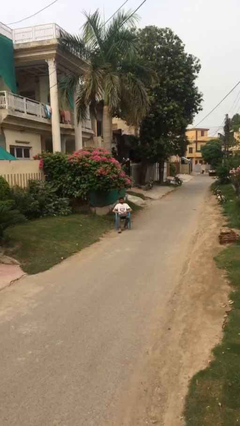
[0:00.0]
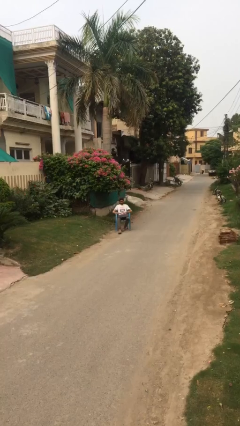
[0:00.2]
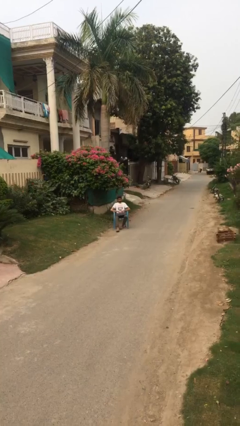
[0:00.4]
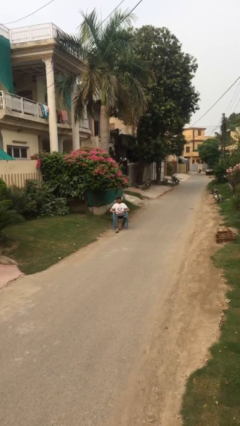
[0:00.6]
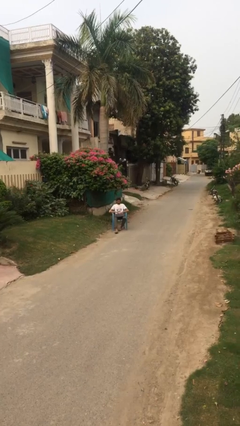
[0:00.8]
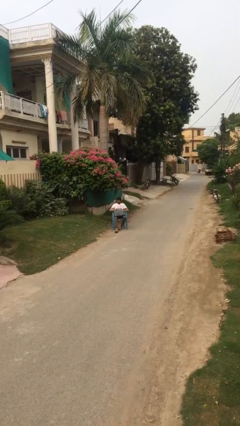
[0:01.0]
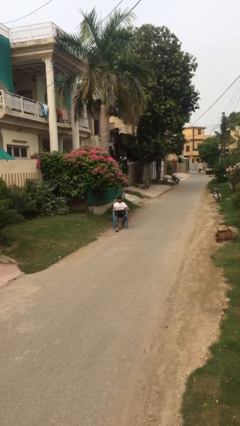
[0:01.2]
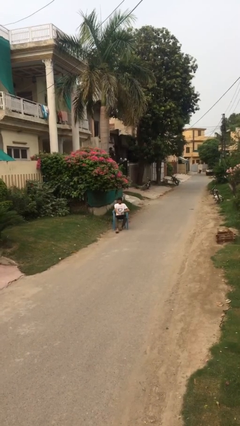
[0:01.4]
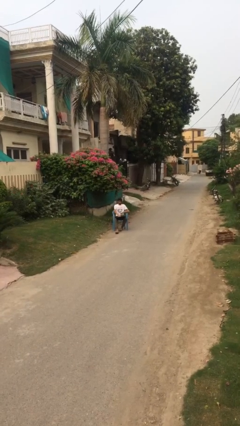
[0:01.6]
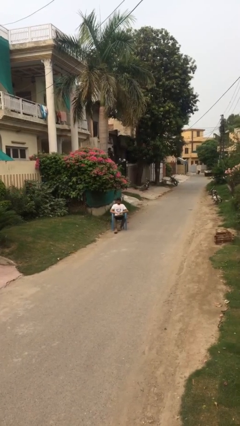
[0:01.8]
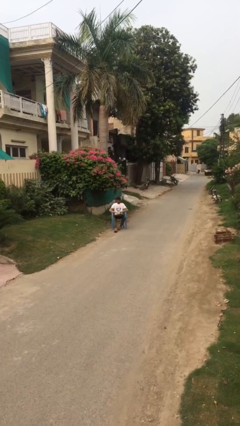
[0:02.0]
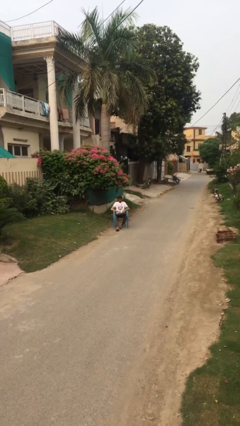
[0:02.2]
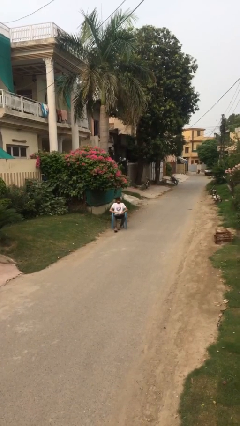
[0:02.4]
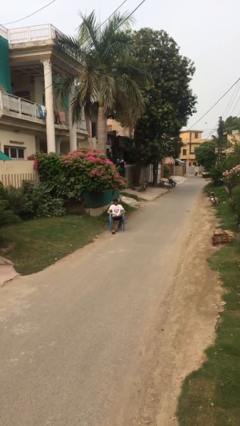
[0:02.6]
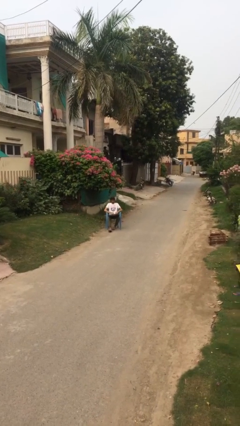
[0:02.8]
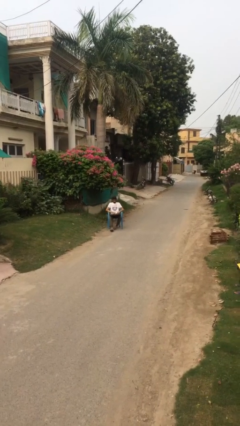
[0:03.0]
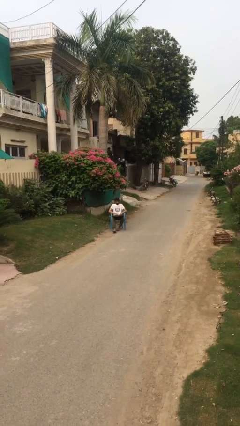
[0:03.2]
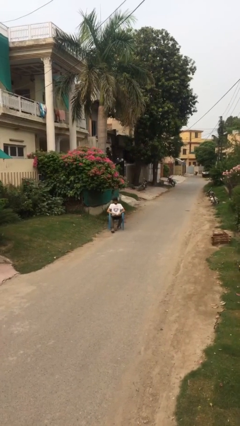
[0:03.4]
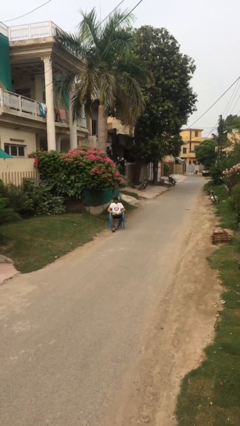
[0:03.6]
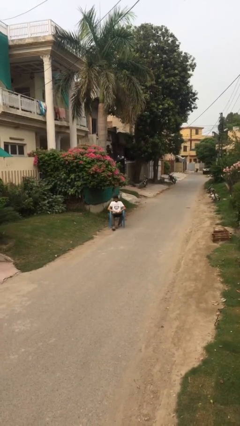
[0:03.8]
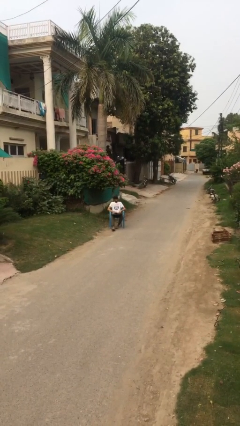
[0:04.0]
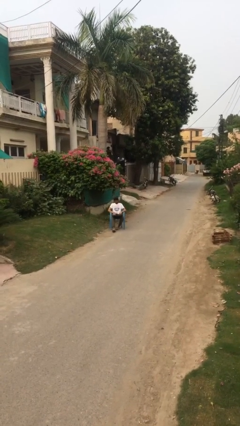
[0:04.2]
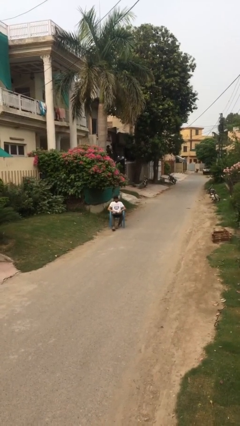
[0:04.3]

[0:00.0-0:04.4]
person interacts with laptop

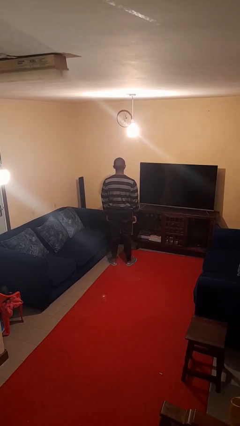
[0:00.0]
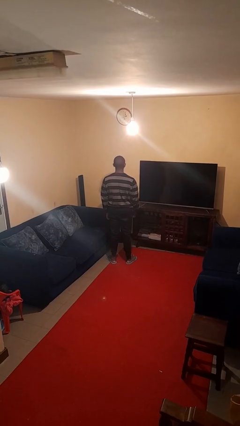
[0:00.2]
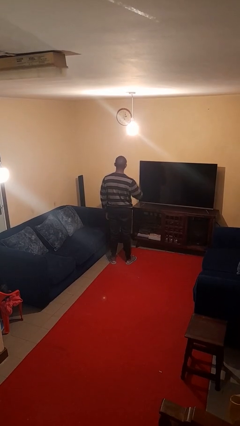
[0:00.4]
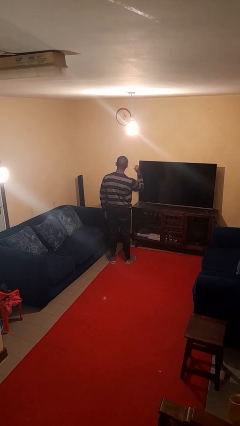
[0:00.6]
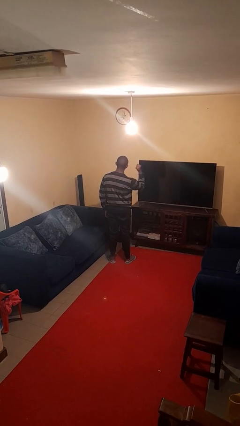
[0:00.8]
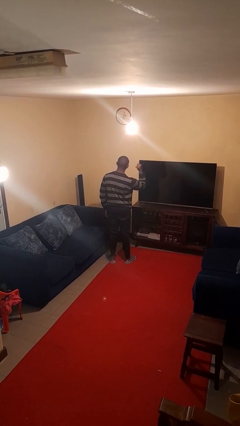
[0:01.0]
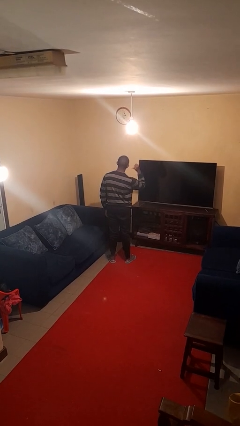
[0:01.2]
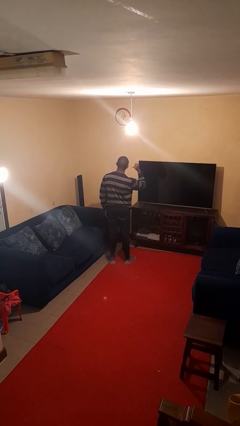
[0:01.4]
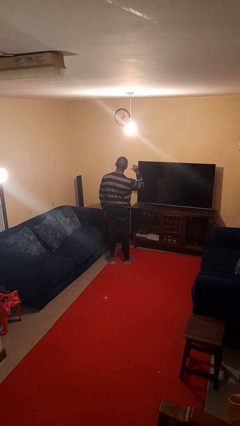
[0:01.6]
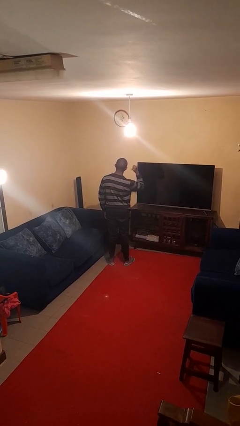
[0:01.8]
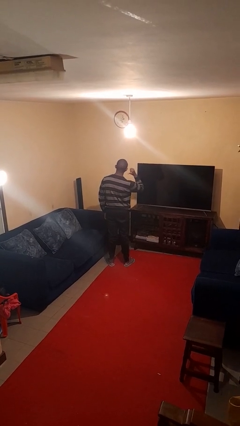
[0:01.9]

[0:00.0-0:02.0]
person gestures behind me

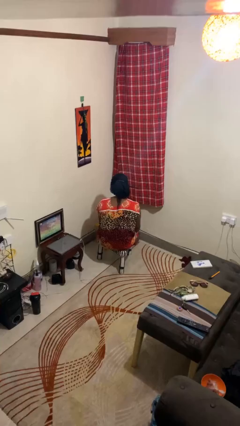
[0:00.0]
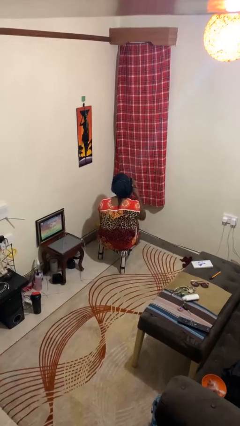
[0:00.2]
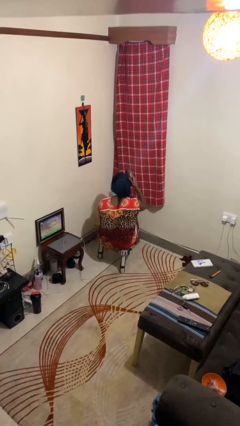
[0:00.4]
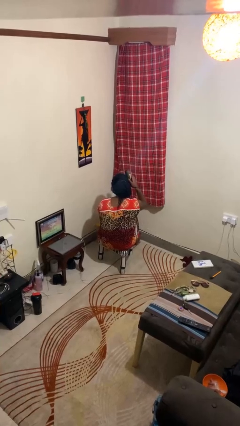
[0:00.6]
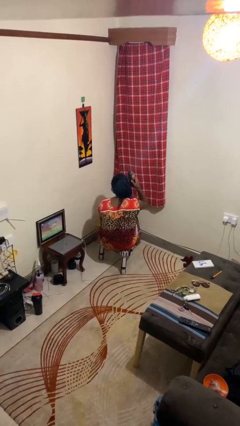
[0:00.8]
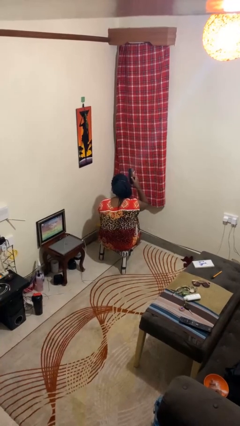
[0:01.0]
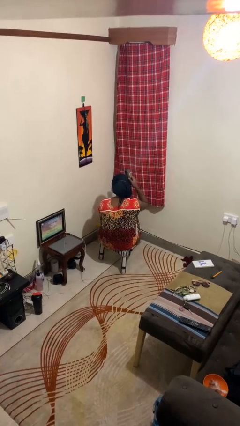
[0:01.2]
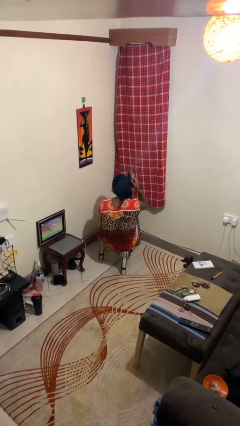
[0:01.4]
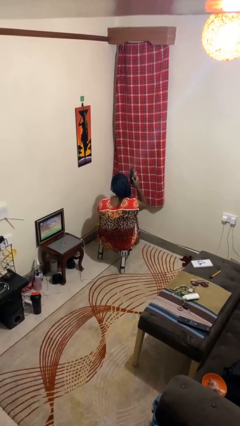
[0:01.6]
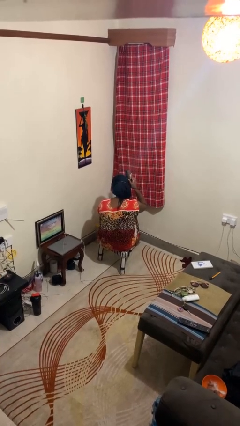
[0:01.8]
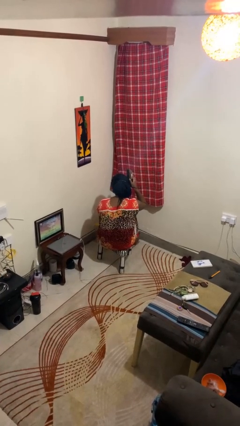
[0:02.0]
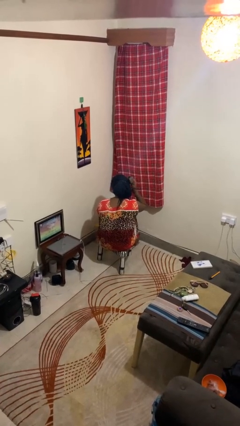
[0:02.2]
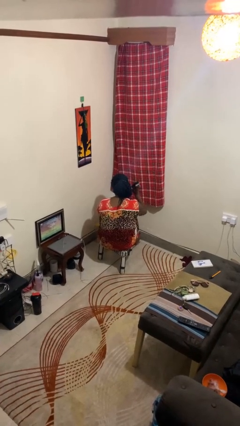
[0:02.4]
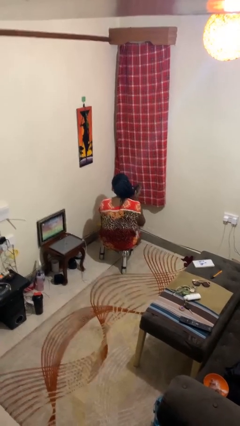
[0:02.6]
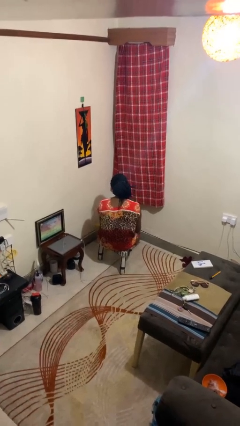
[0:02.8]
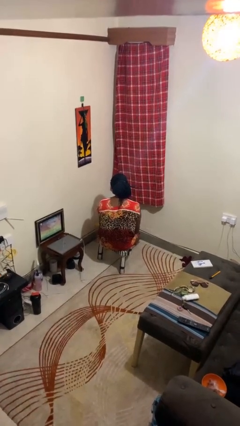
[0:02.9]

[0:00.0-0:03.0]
person brushes hair

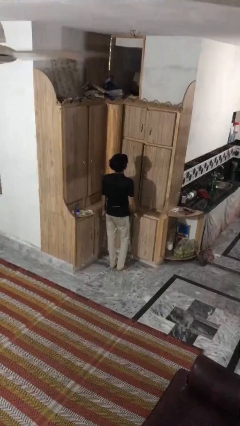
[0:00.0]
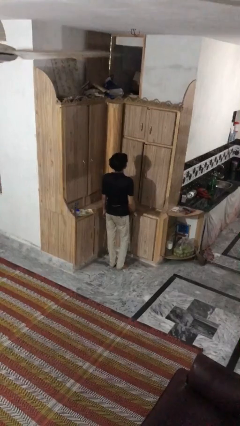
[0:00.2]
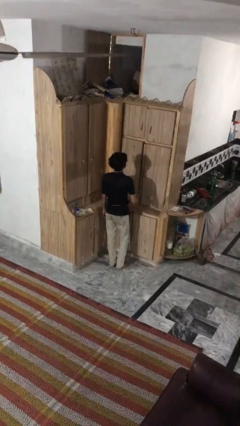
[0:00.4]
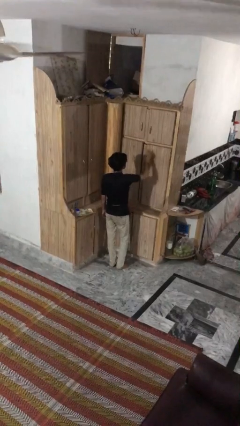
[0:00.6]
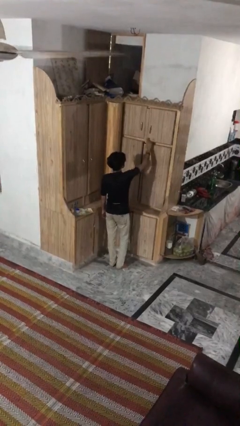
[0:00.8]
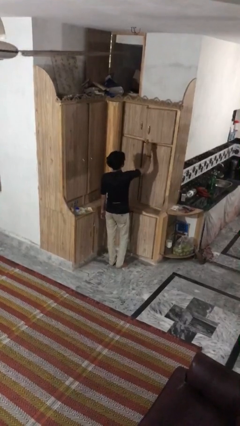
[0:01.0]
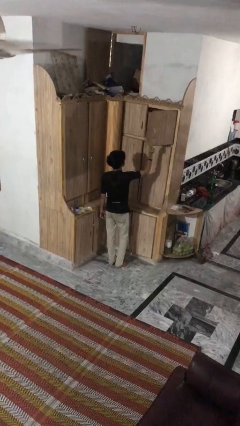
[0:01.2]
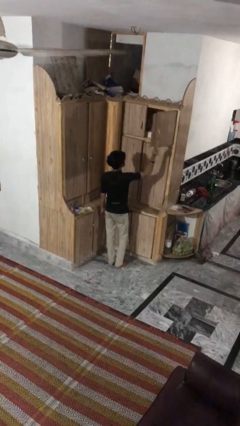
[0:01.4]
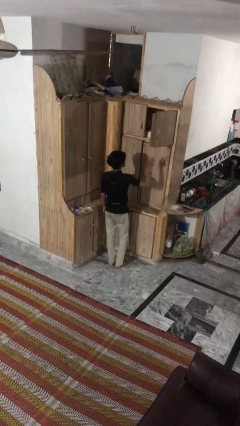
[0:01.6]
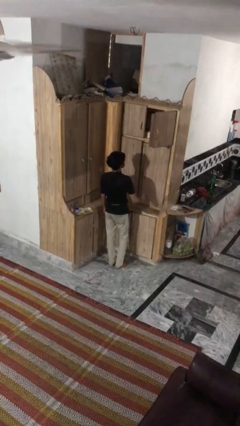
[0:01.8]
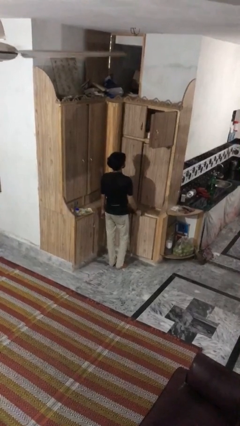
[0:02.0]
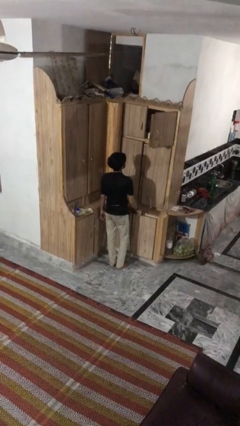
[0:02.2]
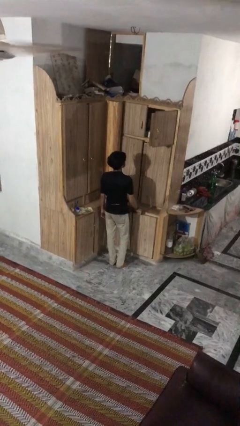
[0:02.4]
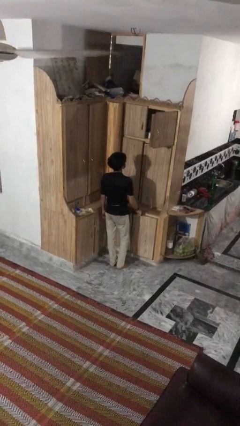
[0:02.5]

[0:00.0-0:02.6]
person opens cabinet

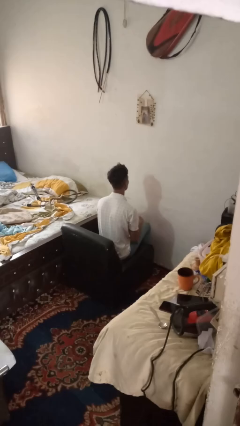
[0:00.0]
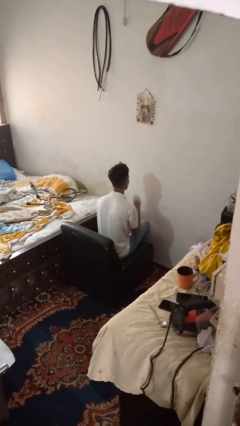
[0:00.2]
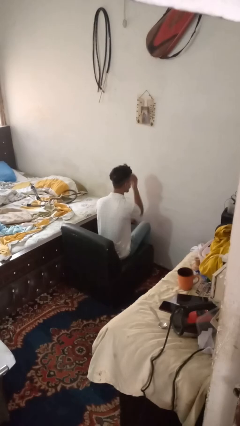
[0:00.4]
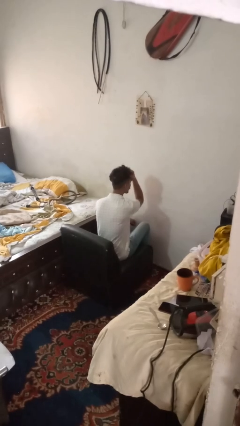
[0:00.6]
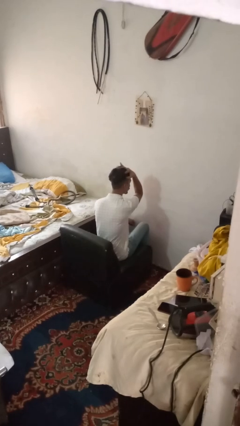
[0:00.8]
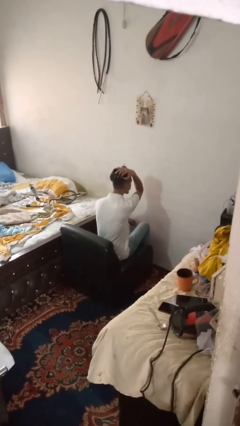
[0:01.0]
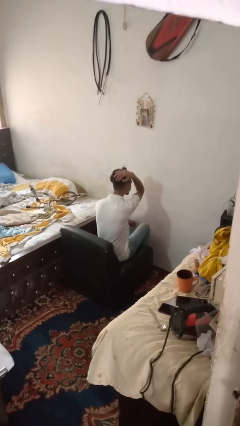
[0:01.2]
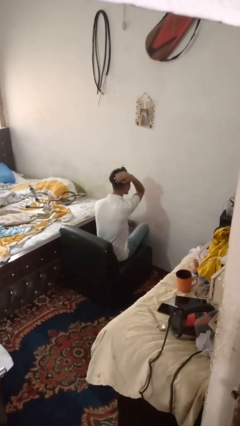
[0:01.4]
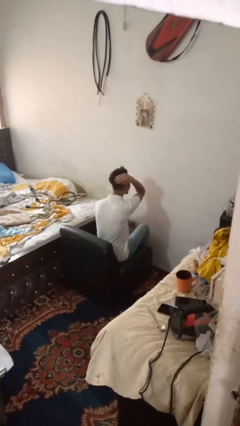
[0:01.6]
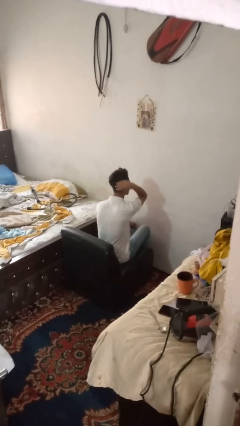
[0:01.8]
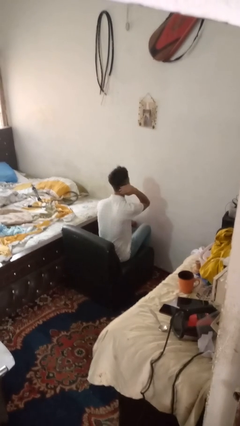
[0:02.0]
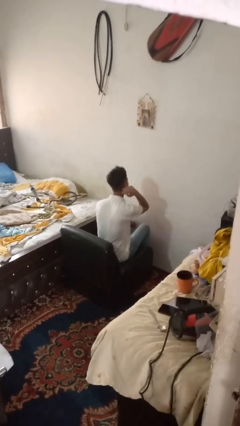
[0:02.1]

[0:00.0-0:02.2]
person strokes hair

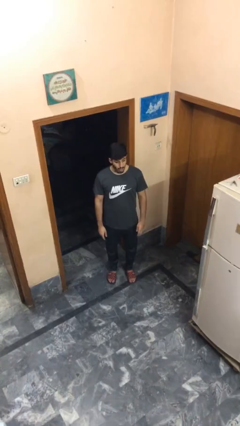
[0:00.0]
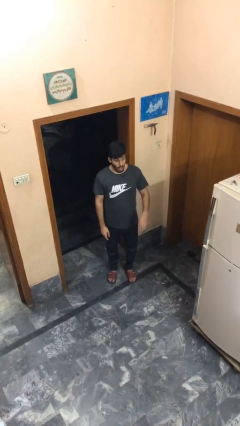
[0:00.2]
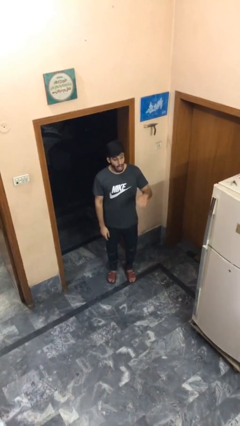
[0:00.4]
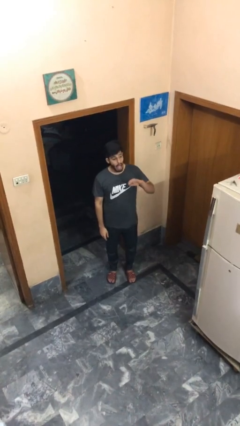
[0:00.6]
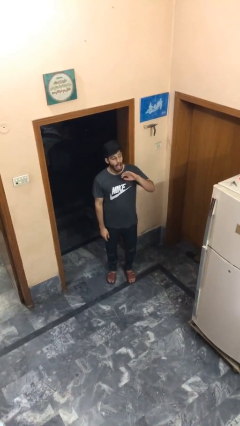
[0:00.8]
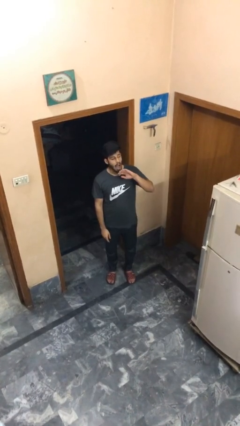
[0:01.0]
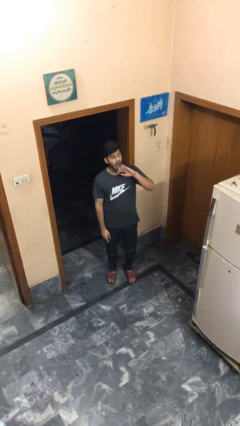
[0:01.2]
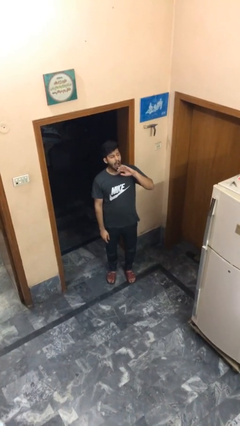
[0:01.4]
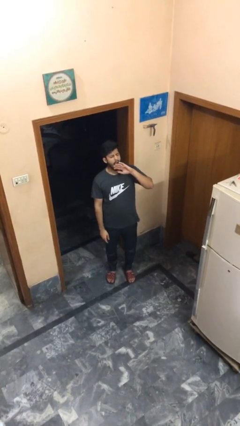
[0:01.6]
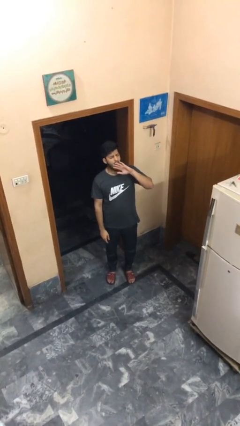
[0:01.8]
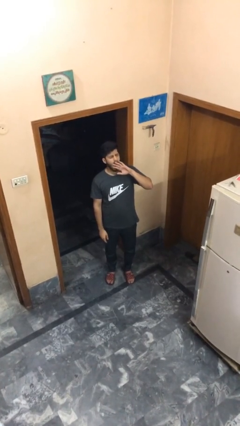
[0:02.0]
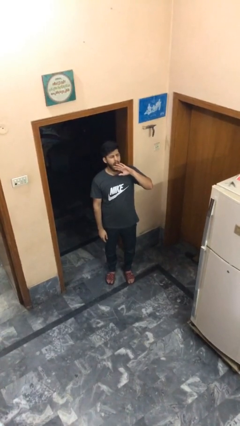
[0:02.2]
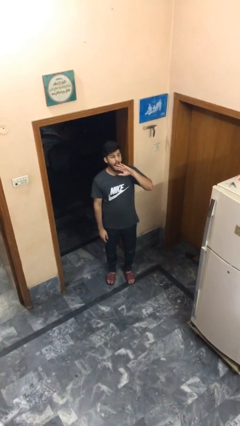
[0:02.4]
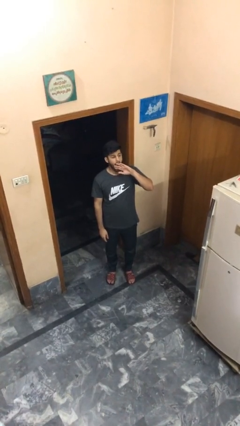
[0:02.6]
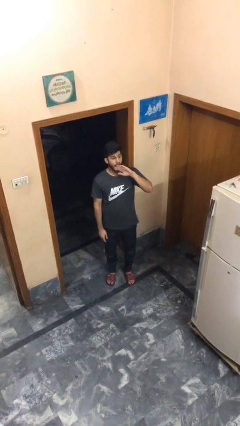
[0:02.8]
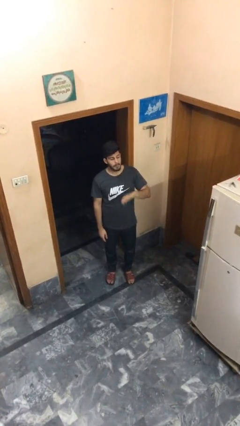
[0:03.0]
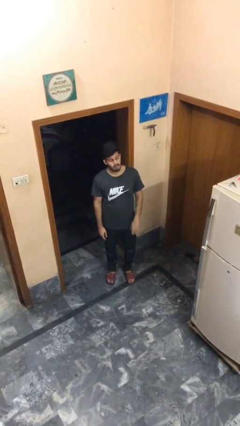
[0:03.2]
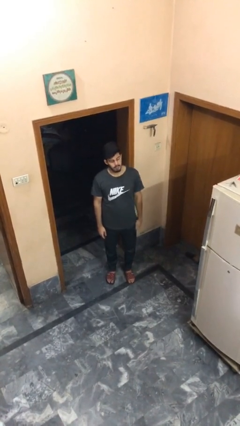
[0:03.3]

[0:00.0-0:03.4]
person yawns
